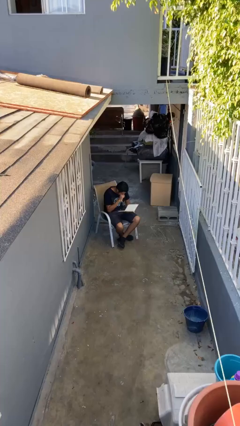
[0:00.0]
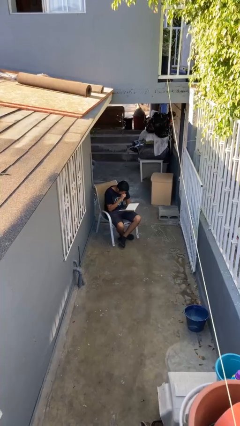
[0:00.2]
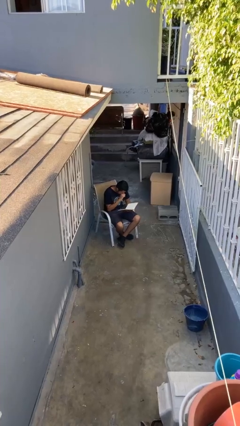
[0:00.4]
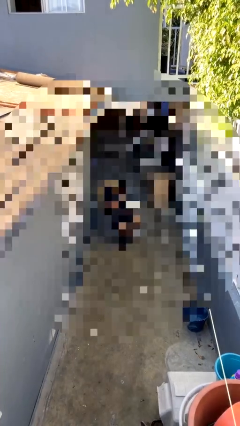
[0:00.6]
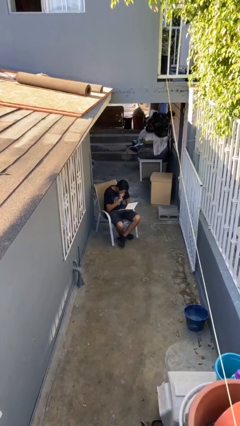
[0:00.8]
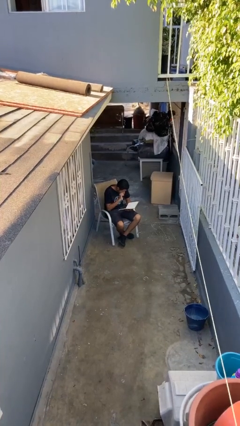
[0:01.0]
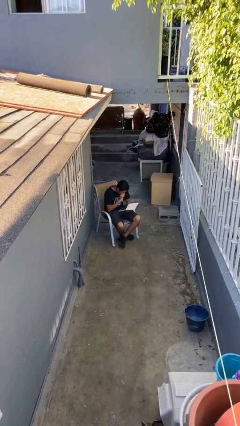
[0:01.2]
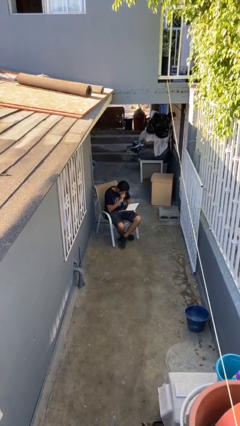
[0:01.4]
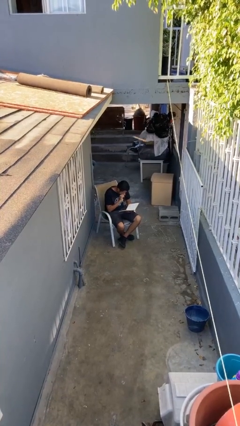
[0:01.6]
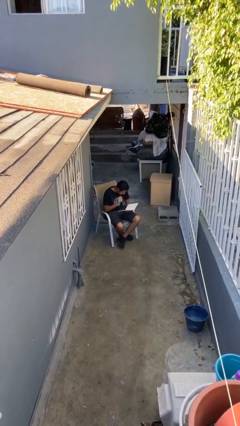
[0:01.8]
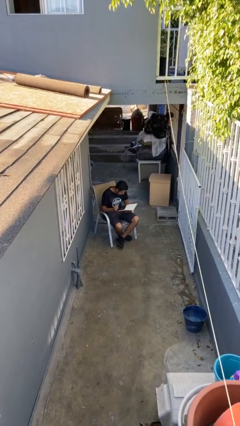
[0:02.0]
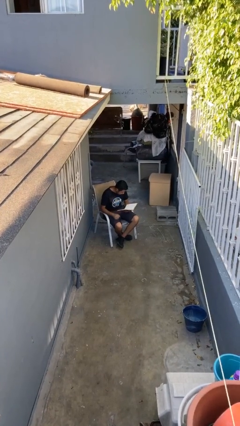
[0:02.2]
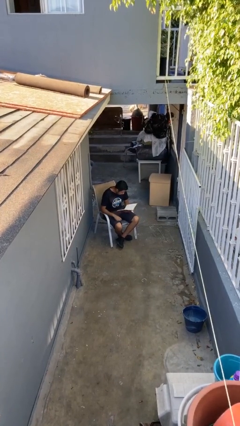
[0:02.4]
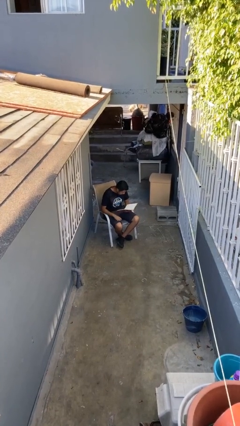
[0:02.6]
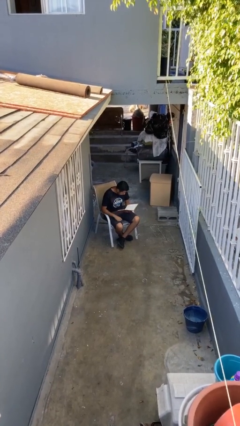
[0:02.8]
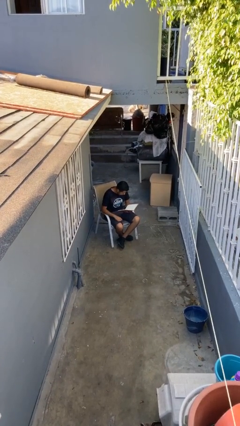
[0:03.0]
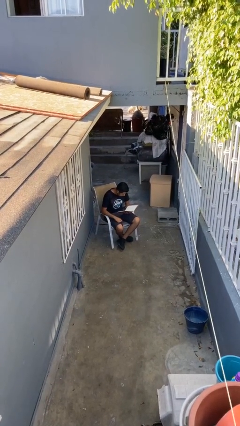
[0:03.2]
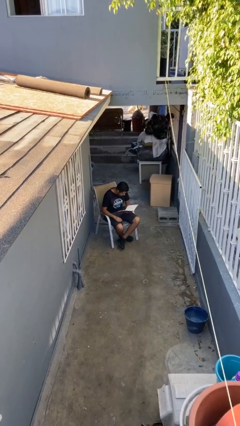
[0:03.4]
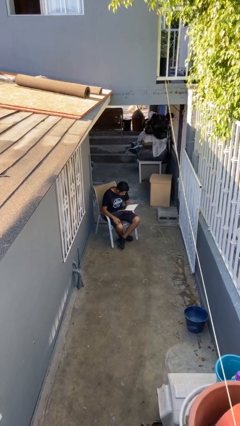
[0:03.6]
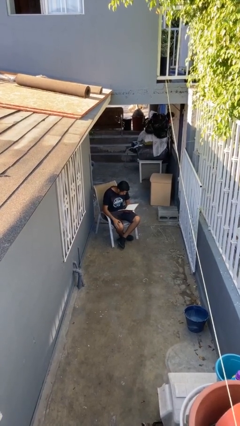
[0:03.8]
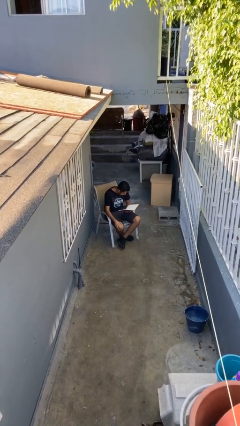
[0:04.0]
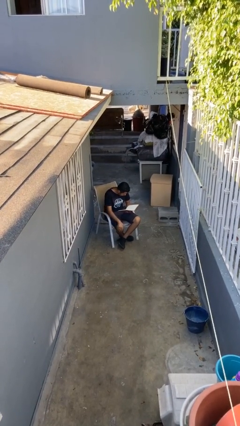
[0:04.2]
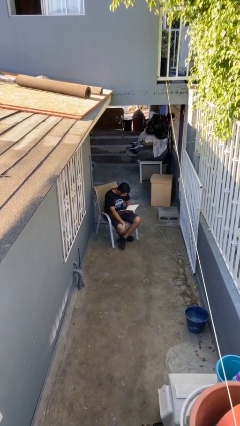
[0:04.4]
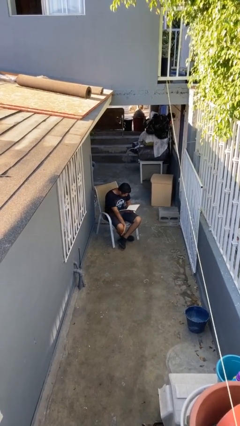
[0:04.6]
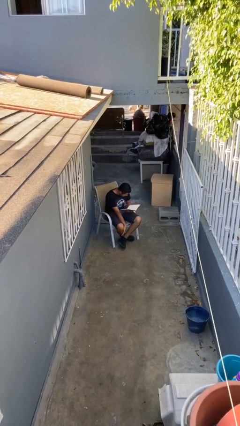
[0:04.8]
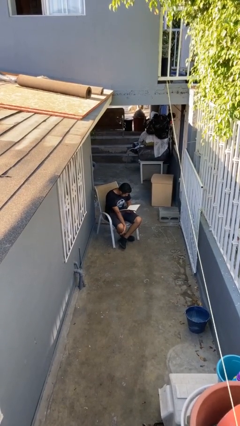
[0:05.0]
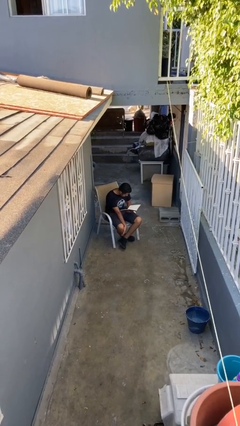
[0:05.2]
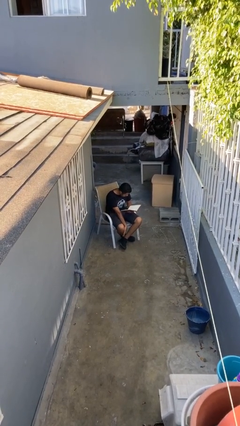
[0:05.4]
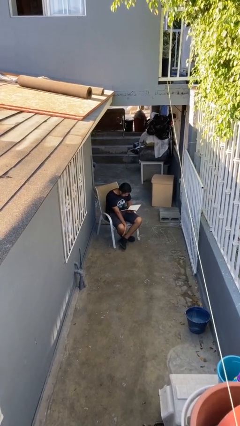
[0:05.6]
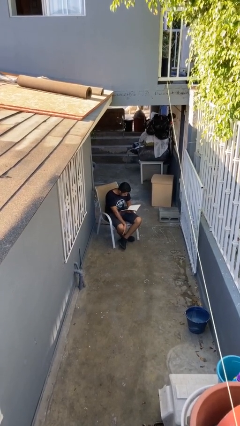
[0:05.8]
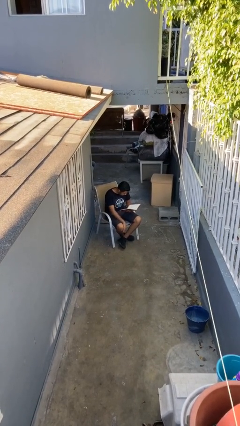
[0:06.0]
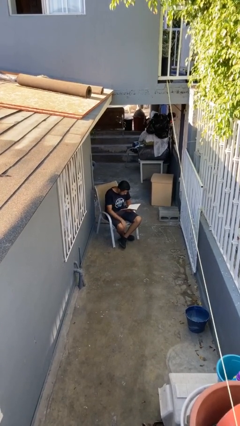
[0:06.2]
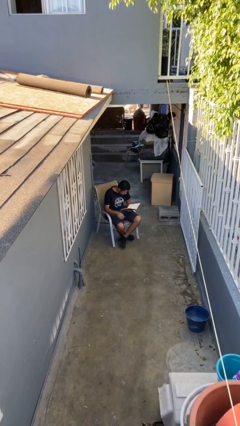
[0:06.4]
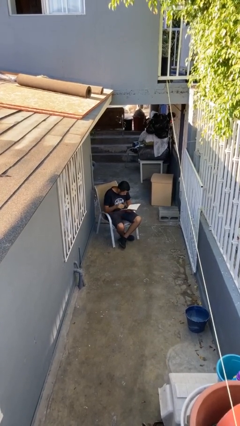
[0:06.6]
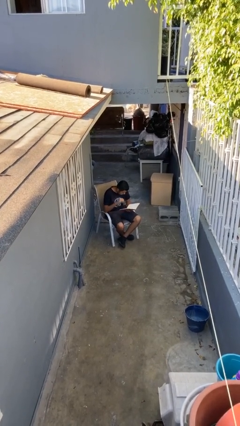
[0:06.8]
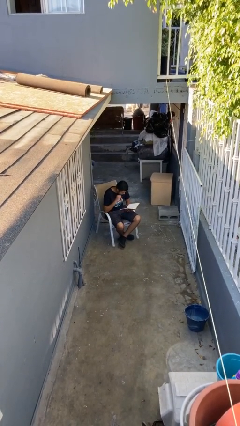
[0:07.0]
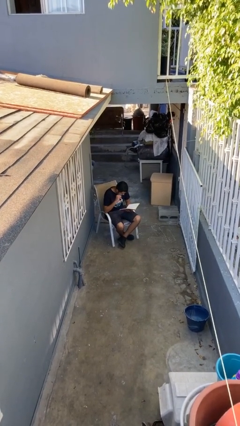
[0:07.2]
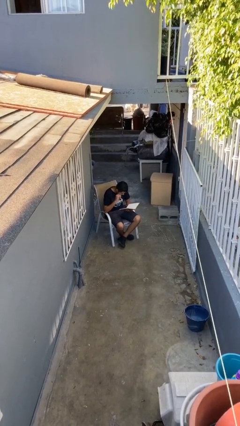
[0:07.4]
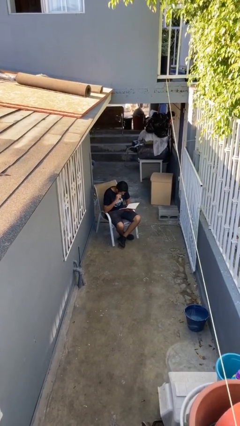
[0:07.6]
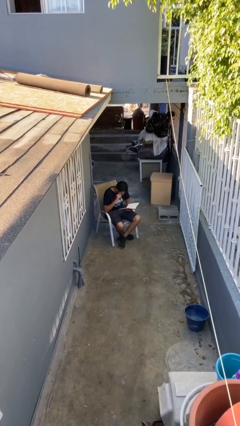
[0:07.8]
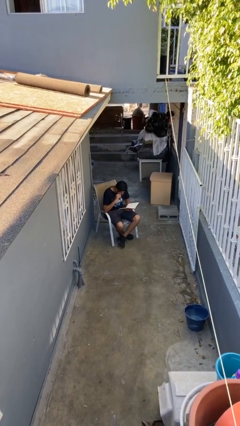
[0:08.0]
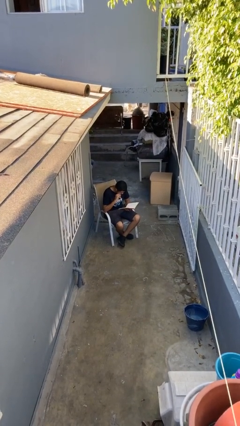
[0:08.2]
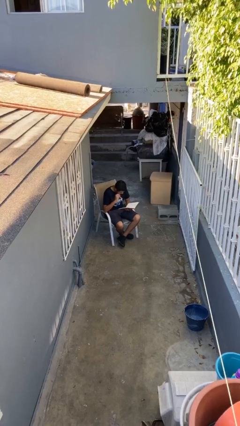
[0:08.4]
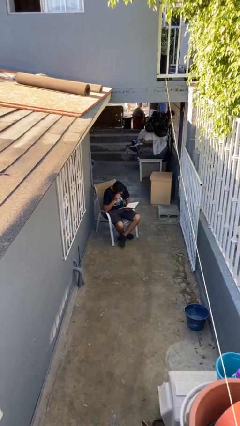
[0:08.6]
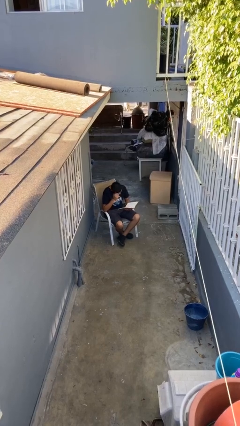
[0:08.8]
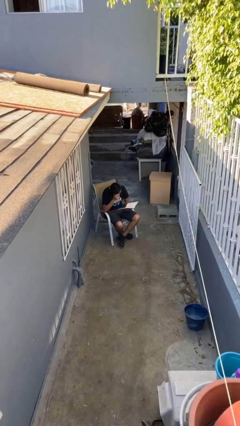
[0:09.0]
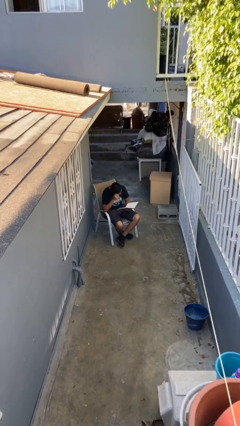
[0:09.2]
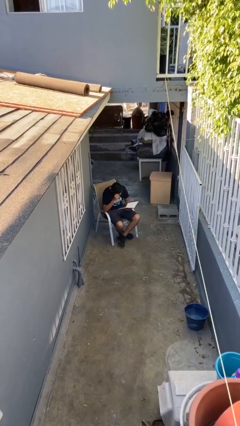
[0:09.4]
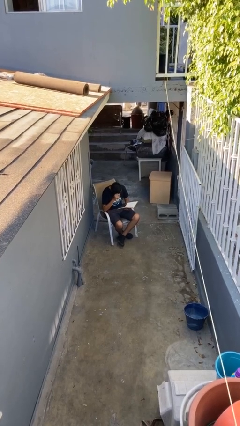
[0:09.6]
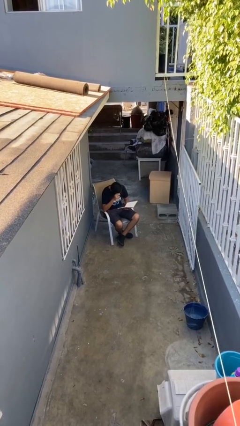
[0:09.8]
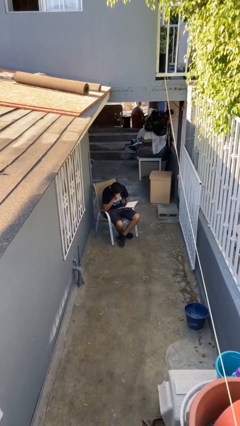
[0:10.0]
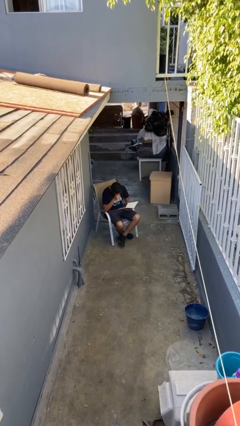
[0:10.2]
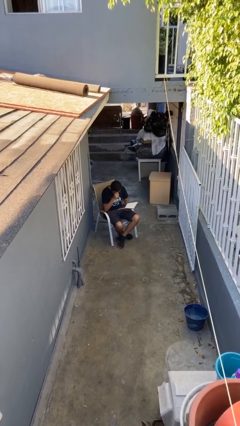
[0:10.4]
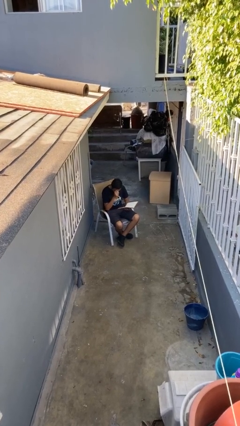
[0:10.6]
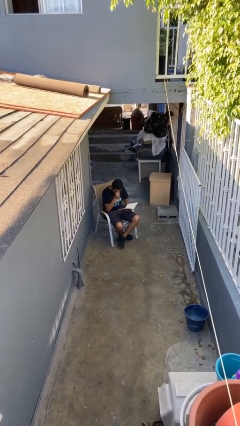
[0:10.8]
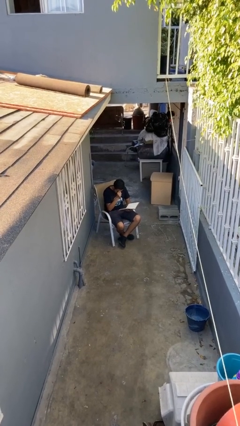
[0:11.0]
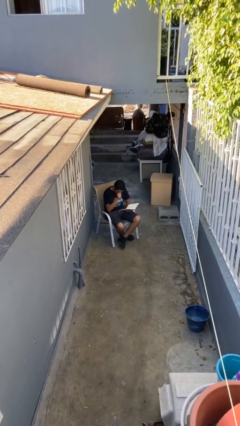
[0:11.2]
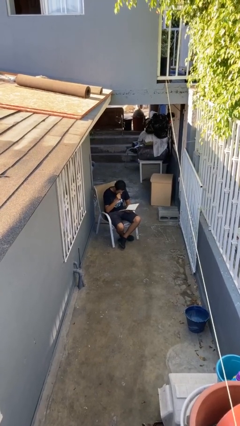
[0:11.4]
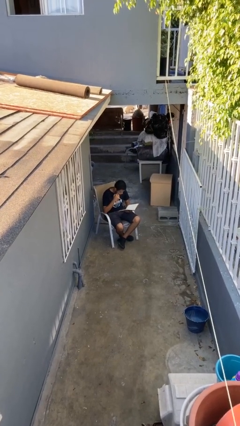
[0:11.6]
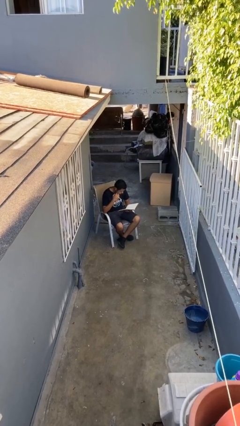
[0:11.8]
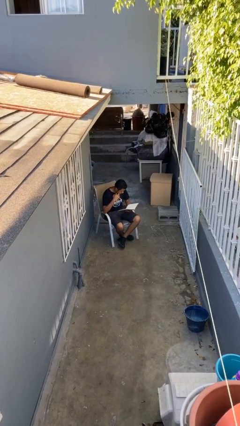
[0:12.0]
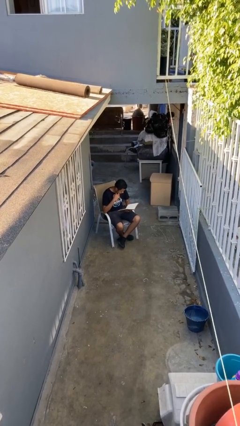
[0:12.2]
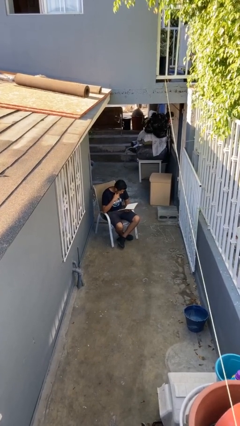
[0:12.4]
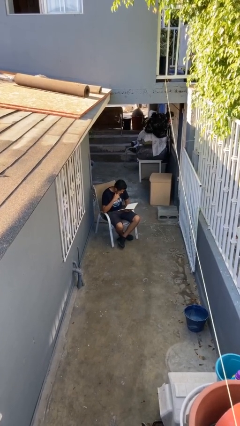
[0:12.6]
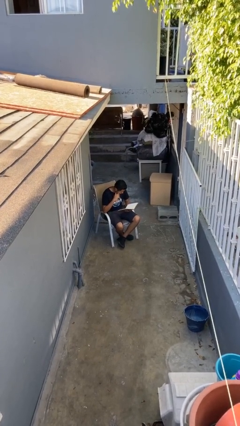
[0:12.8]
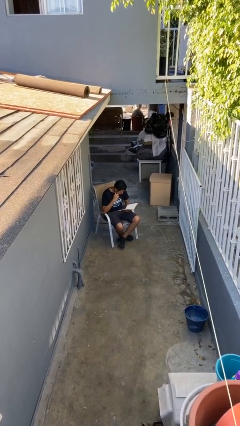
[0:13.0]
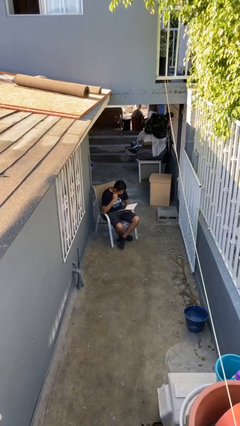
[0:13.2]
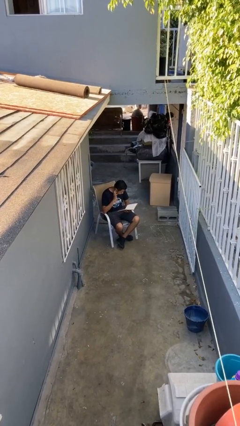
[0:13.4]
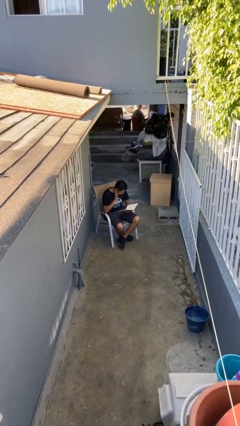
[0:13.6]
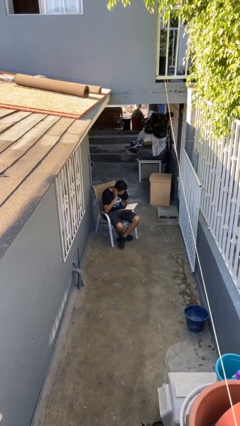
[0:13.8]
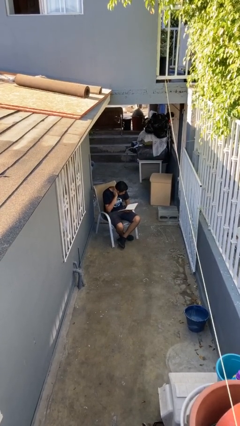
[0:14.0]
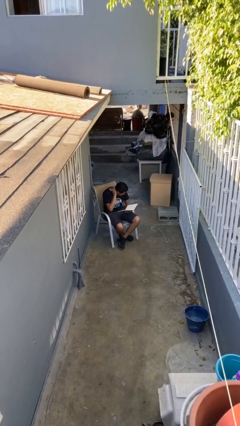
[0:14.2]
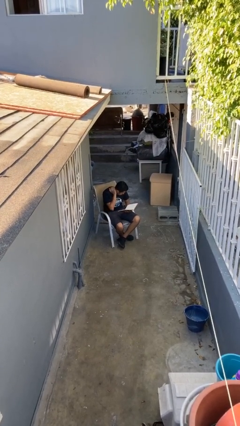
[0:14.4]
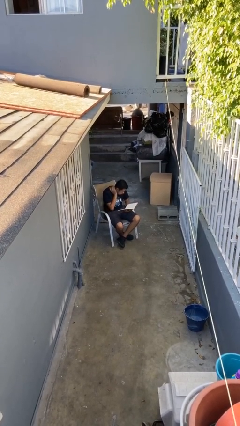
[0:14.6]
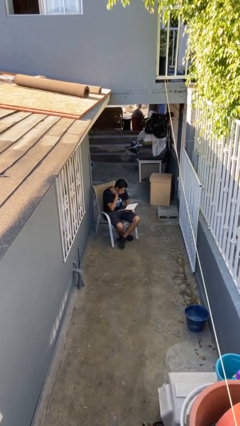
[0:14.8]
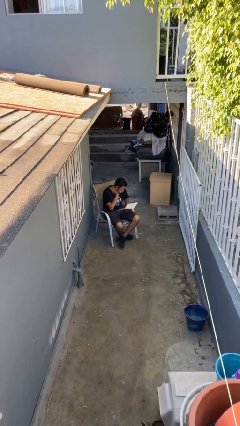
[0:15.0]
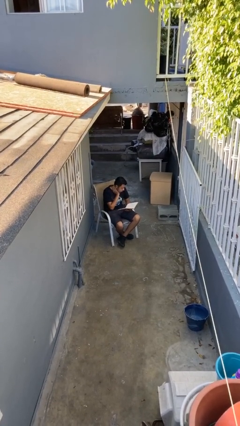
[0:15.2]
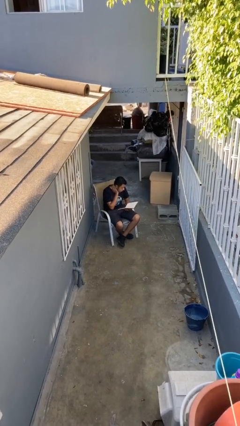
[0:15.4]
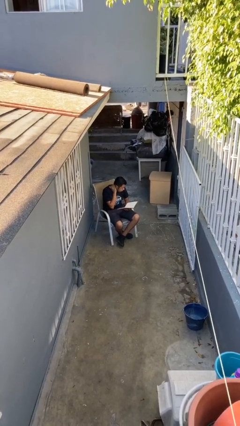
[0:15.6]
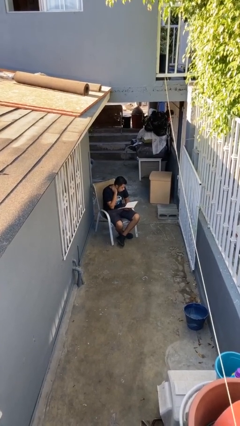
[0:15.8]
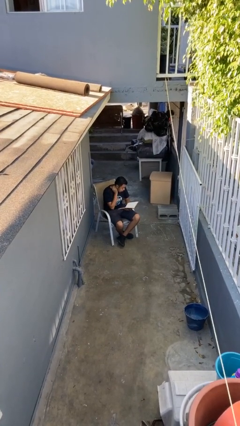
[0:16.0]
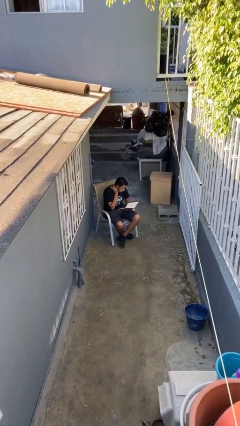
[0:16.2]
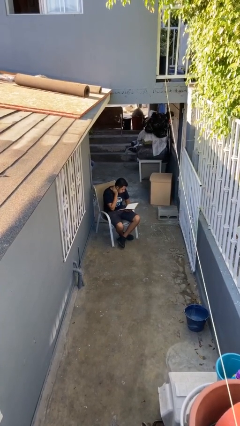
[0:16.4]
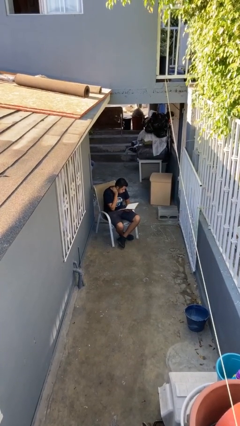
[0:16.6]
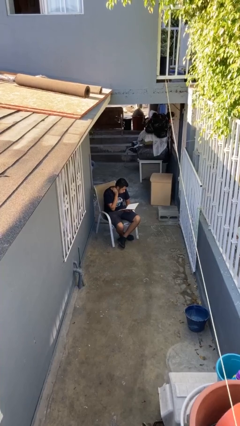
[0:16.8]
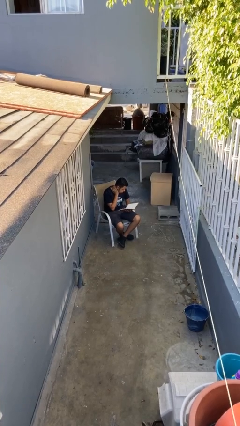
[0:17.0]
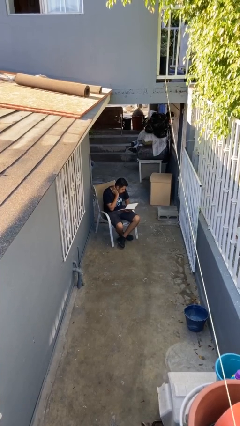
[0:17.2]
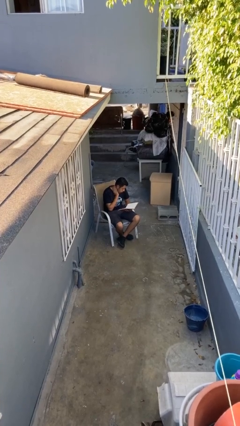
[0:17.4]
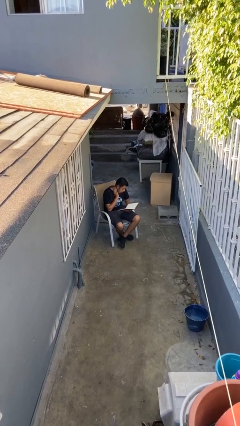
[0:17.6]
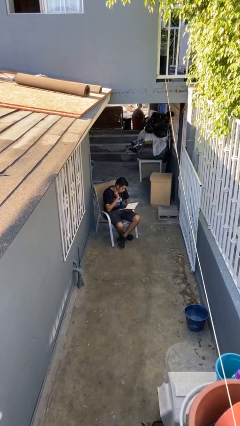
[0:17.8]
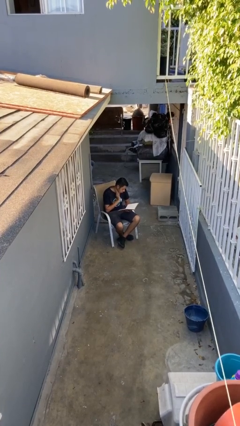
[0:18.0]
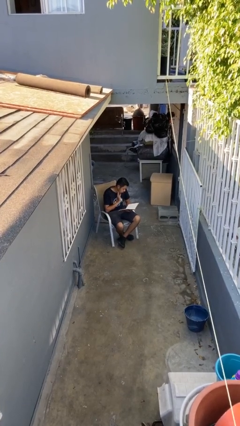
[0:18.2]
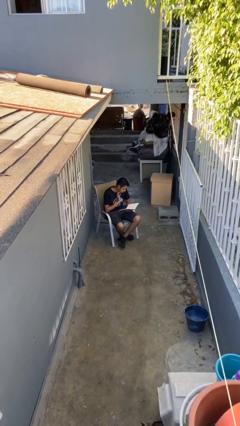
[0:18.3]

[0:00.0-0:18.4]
person reads document
